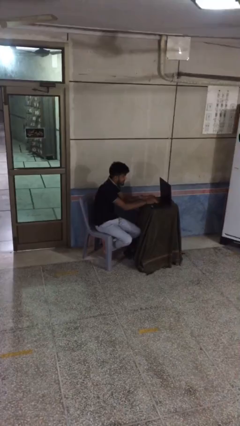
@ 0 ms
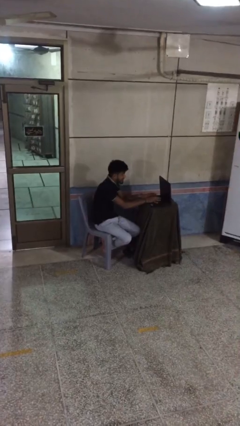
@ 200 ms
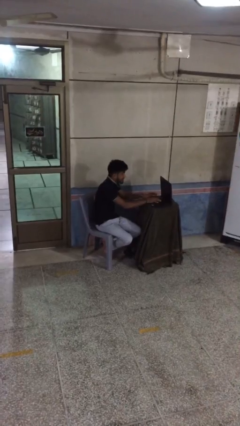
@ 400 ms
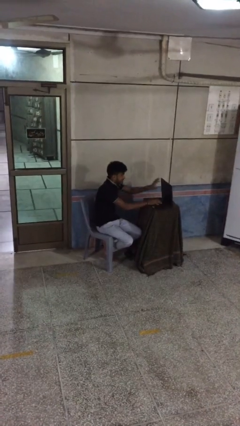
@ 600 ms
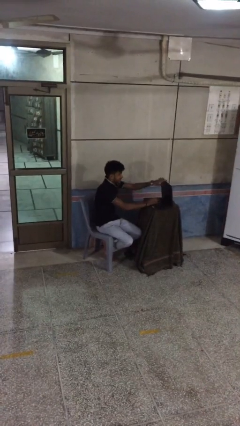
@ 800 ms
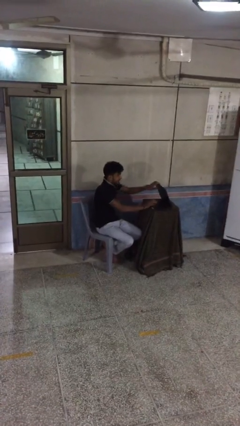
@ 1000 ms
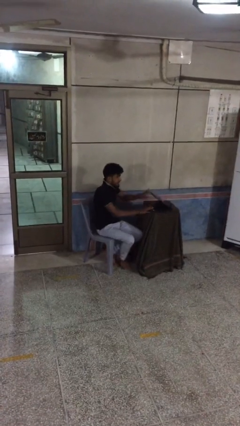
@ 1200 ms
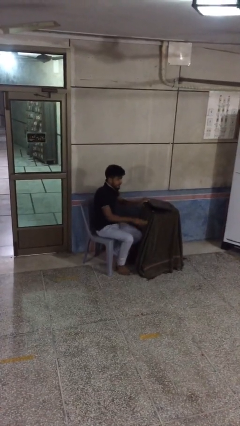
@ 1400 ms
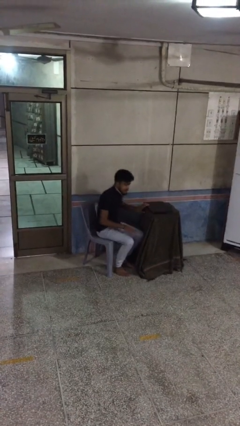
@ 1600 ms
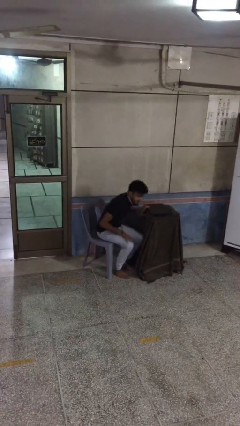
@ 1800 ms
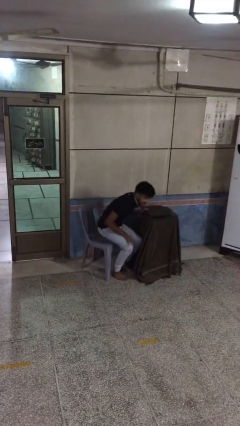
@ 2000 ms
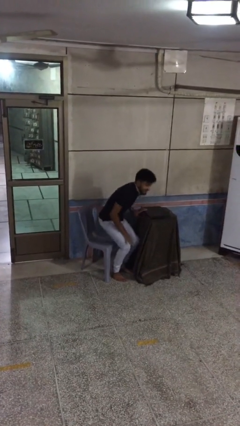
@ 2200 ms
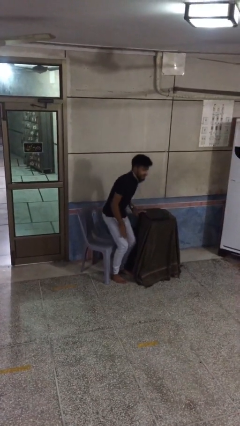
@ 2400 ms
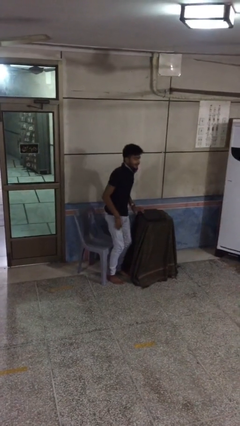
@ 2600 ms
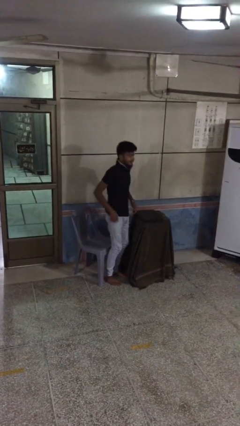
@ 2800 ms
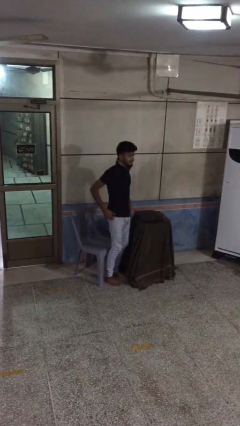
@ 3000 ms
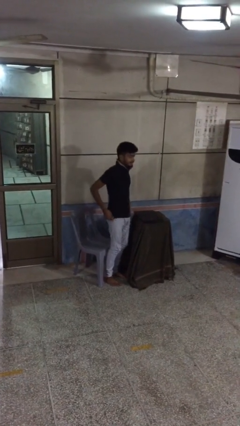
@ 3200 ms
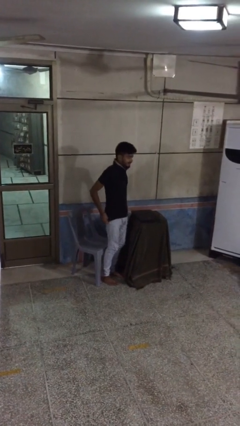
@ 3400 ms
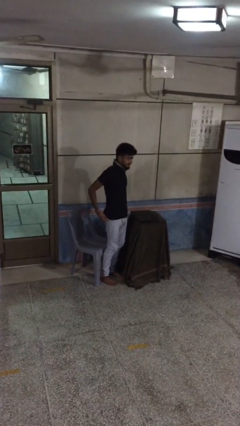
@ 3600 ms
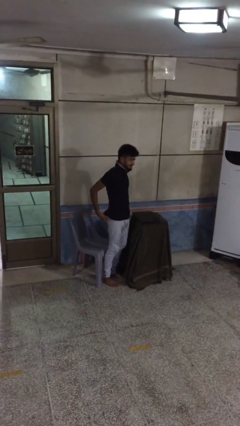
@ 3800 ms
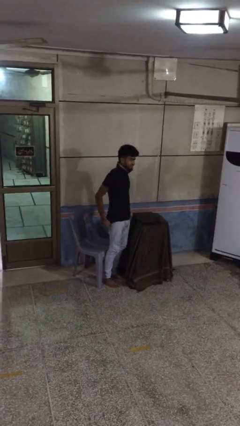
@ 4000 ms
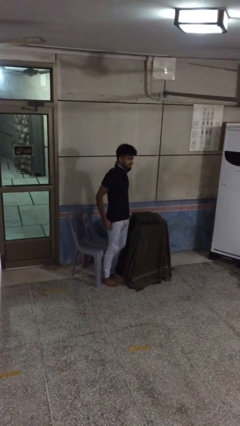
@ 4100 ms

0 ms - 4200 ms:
person stands up

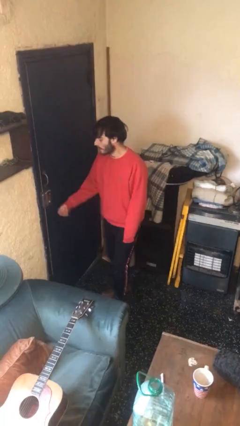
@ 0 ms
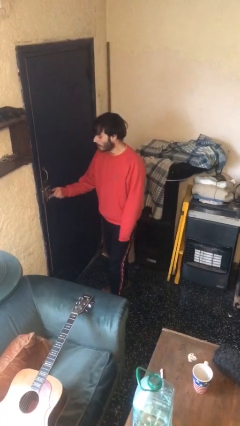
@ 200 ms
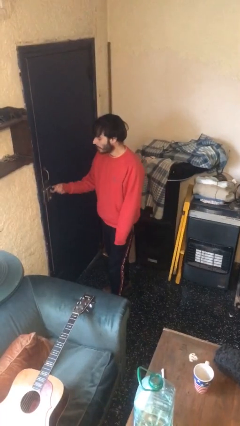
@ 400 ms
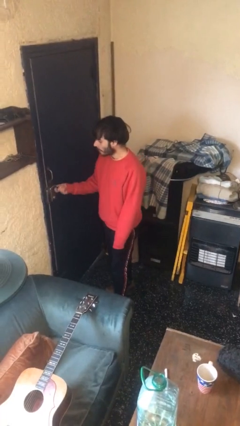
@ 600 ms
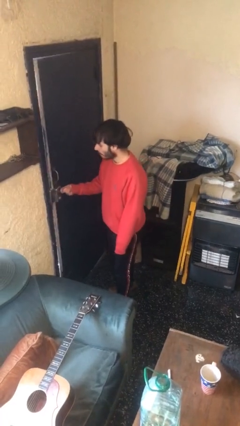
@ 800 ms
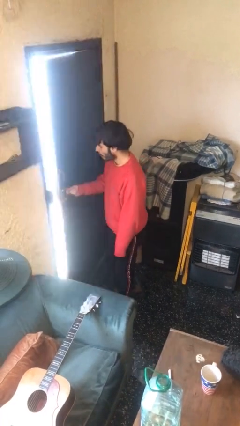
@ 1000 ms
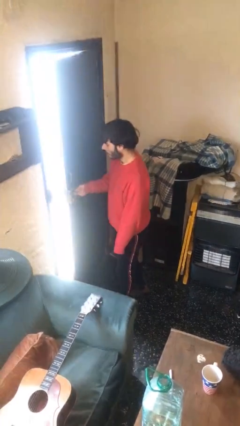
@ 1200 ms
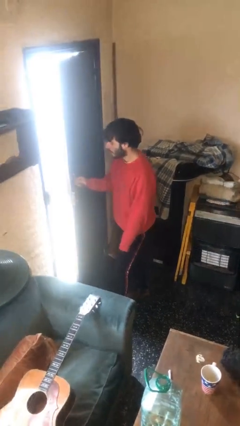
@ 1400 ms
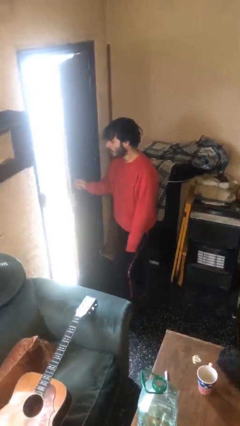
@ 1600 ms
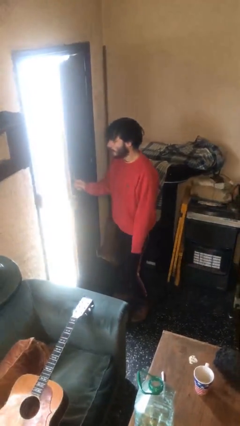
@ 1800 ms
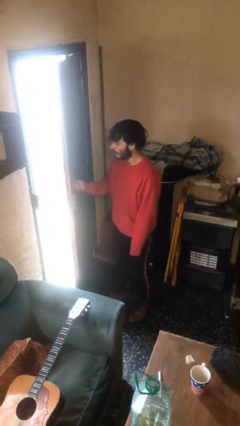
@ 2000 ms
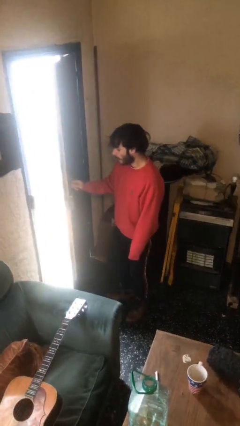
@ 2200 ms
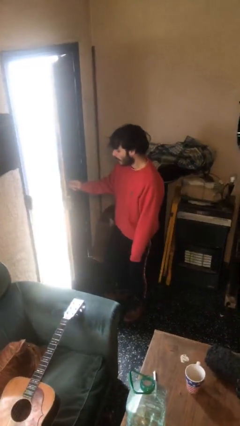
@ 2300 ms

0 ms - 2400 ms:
person opens facility door

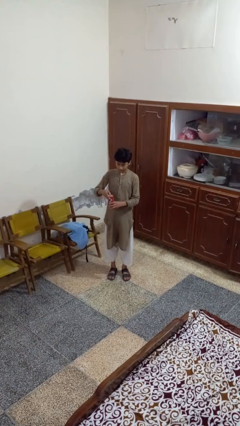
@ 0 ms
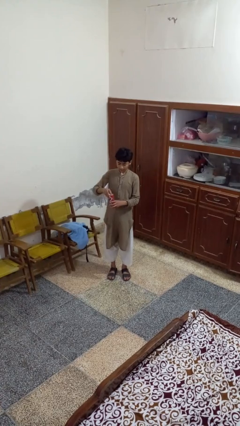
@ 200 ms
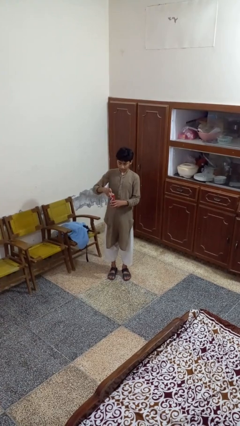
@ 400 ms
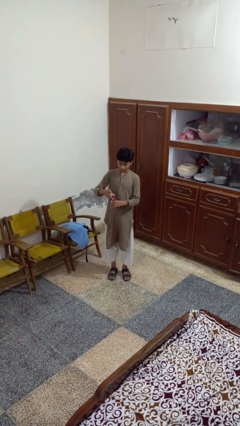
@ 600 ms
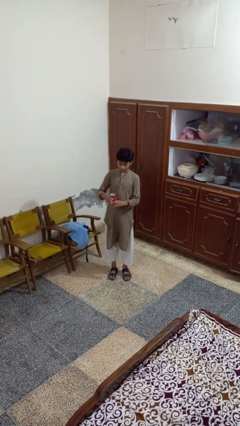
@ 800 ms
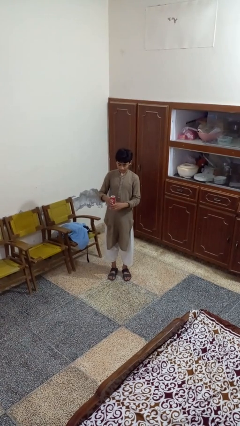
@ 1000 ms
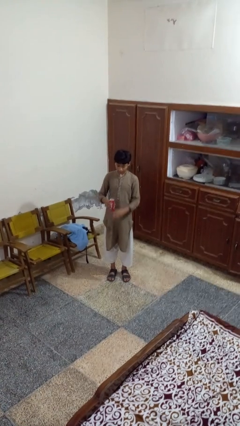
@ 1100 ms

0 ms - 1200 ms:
person opens beverage can

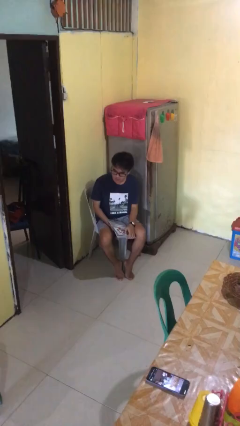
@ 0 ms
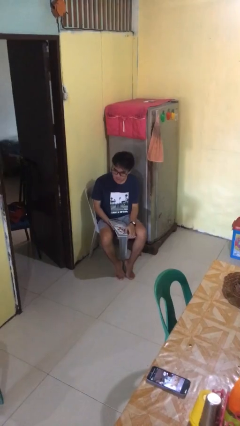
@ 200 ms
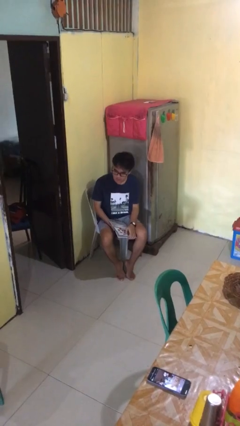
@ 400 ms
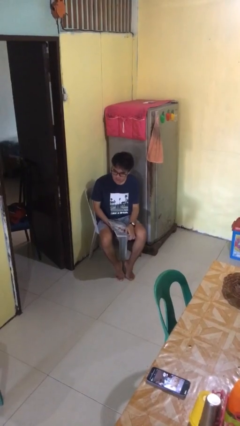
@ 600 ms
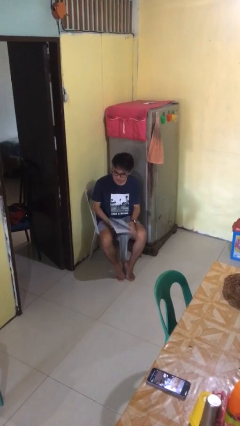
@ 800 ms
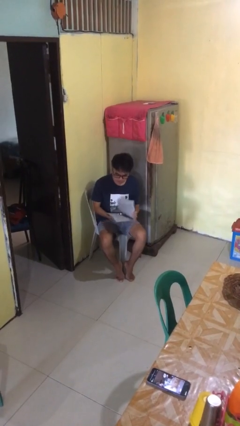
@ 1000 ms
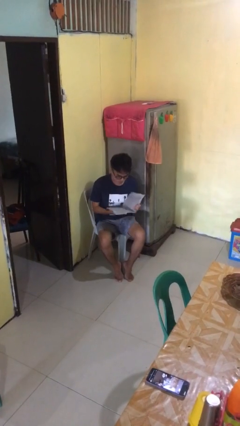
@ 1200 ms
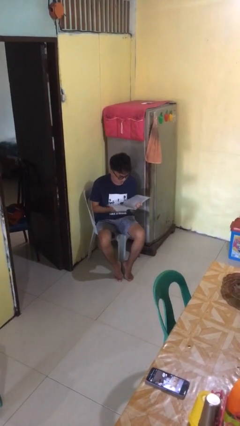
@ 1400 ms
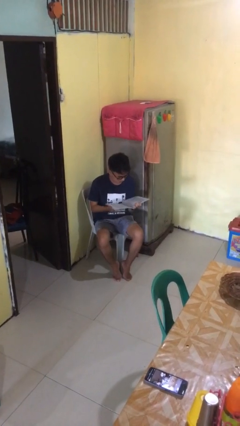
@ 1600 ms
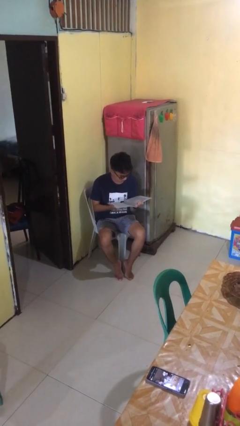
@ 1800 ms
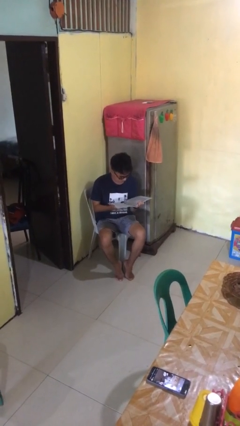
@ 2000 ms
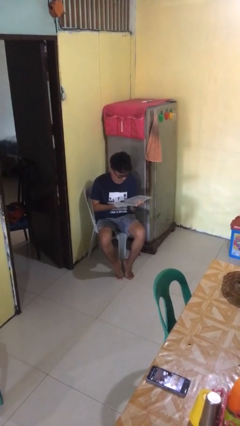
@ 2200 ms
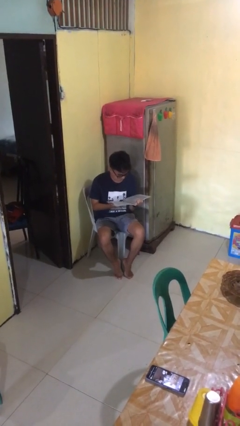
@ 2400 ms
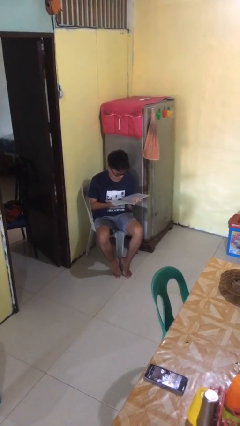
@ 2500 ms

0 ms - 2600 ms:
person reads book

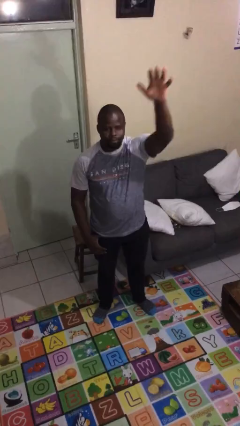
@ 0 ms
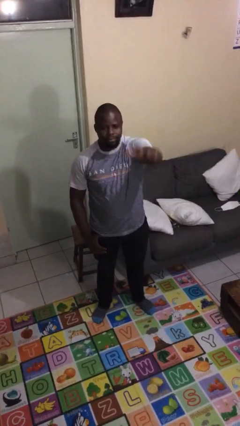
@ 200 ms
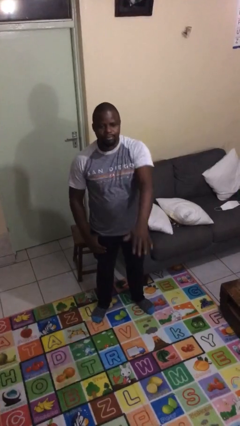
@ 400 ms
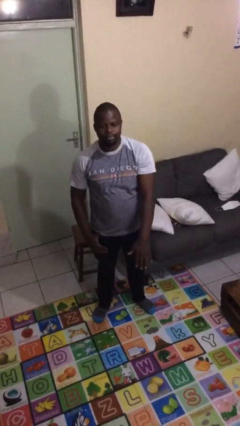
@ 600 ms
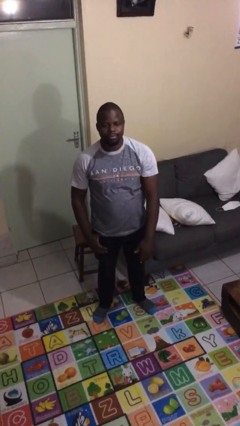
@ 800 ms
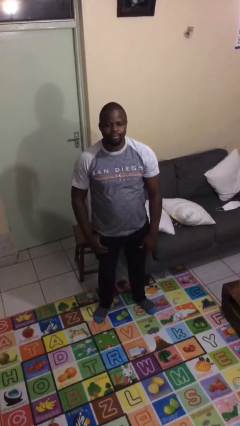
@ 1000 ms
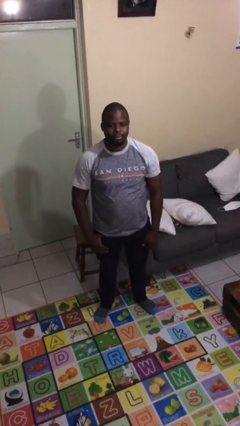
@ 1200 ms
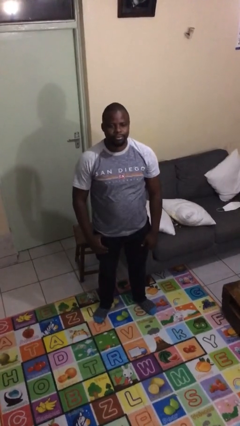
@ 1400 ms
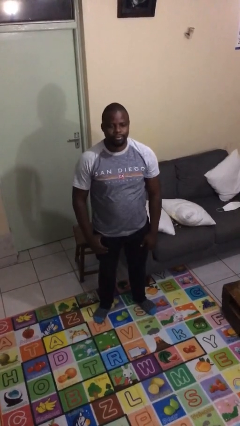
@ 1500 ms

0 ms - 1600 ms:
person gestures swipe down

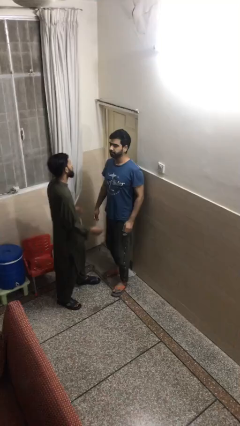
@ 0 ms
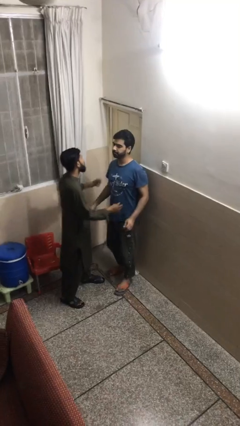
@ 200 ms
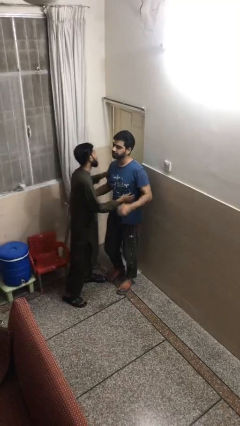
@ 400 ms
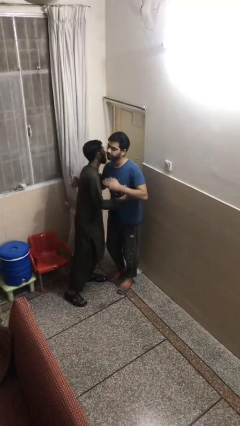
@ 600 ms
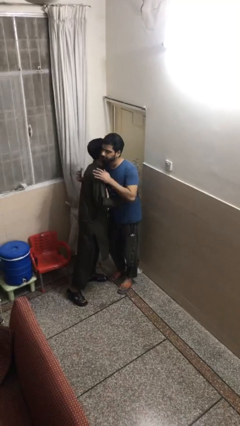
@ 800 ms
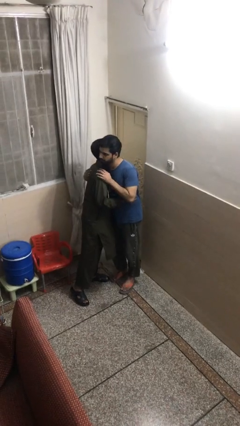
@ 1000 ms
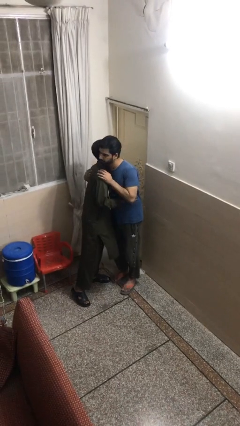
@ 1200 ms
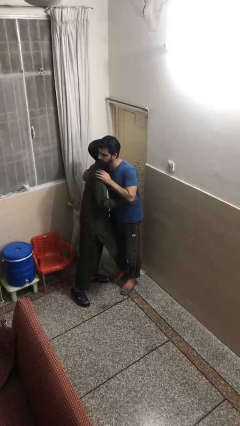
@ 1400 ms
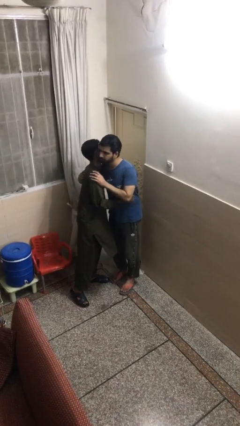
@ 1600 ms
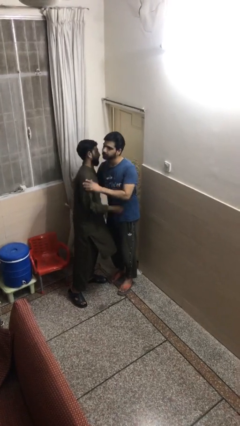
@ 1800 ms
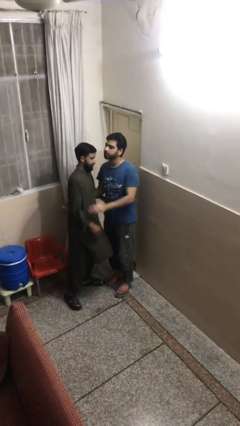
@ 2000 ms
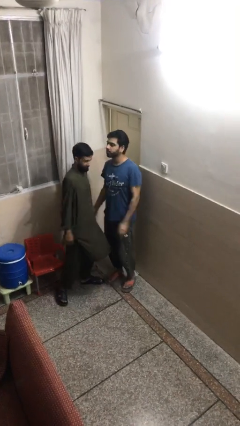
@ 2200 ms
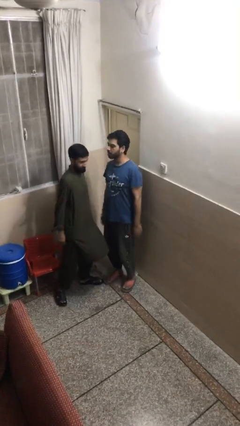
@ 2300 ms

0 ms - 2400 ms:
person embraces person

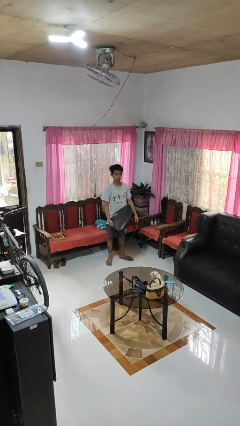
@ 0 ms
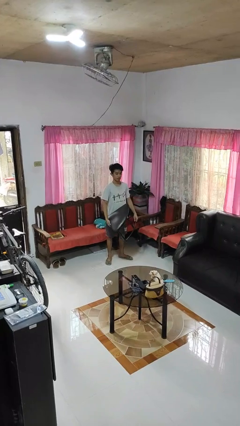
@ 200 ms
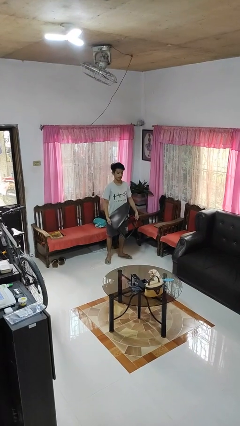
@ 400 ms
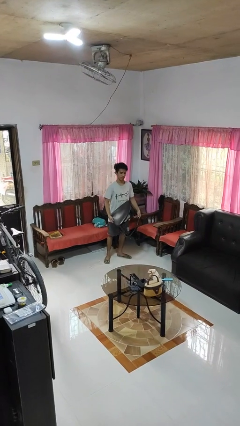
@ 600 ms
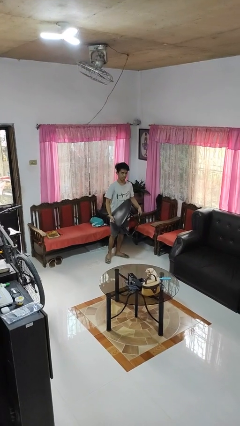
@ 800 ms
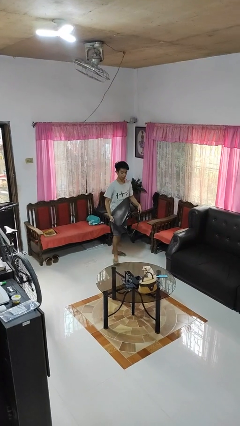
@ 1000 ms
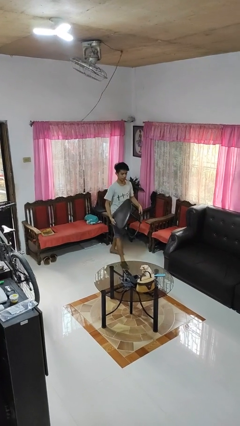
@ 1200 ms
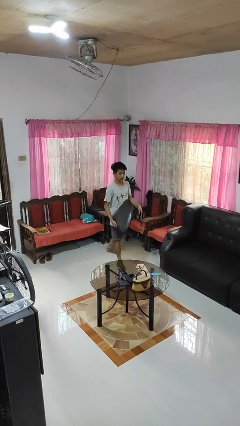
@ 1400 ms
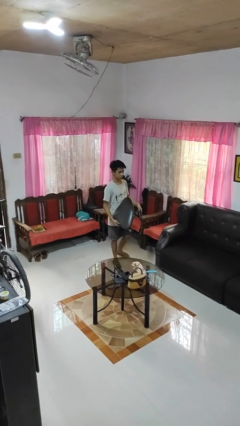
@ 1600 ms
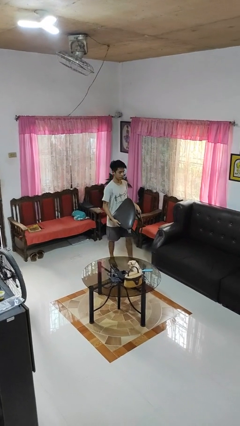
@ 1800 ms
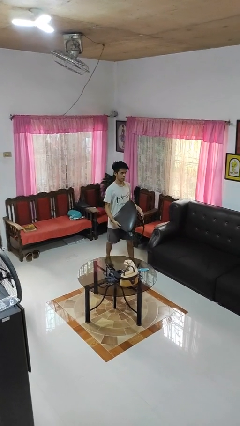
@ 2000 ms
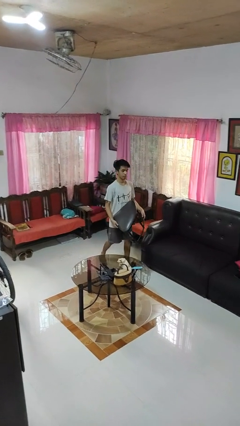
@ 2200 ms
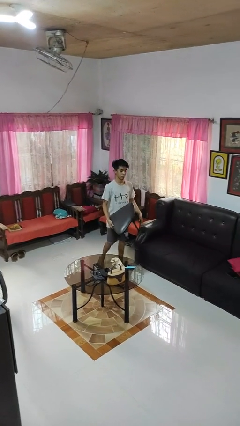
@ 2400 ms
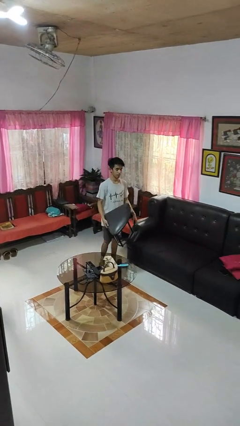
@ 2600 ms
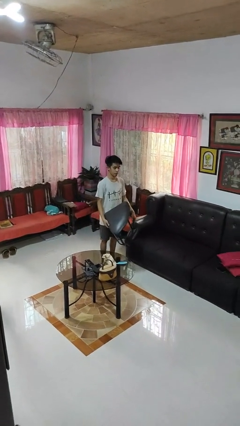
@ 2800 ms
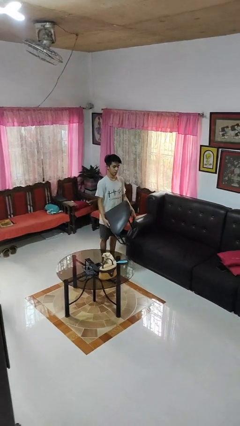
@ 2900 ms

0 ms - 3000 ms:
person carries furniture
